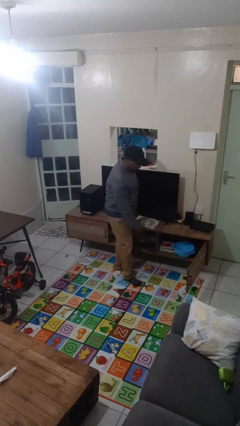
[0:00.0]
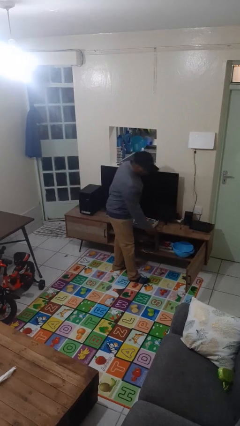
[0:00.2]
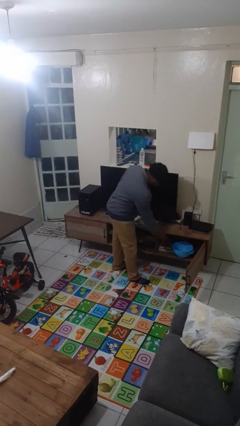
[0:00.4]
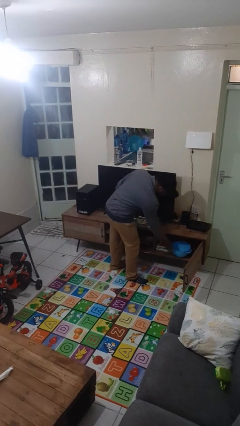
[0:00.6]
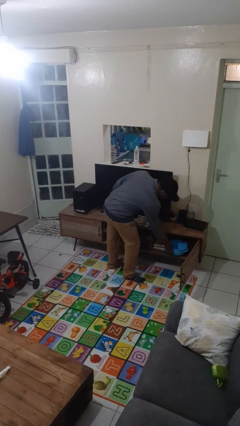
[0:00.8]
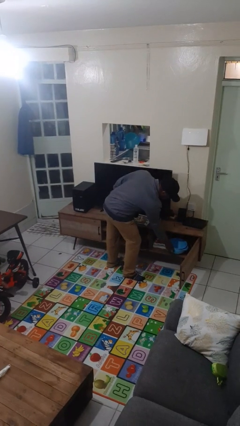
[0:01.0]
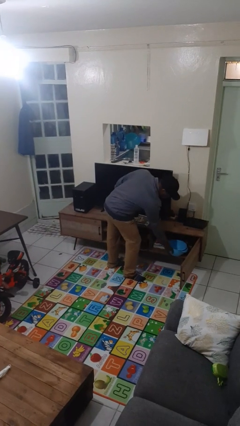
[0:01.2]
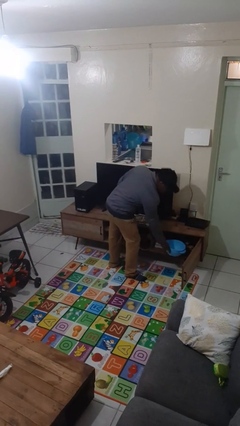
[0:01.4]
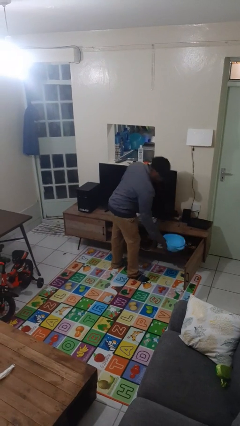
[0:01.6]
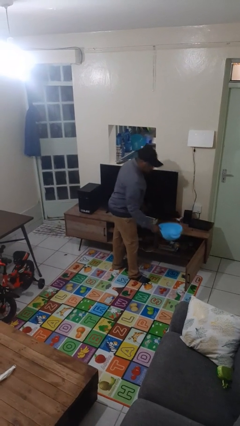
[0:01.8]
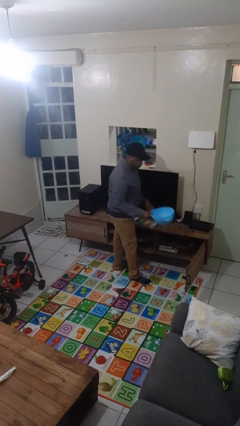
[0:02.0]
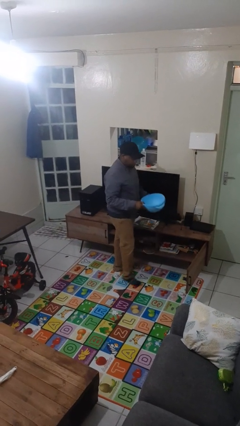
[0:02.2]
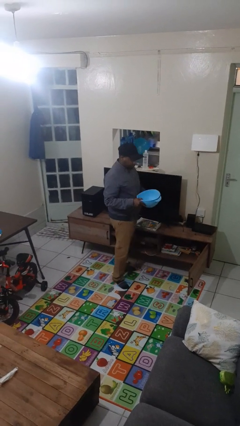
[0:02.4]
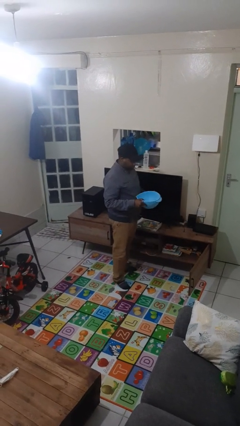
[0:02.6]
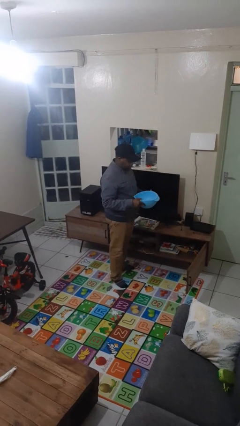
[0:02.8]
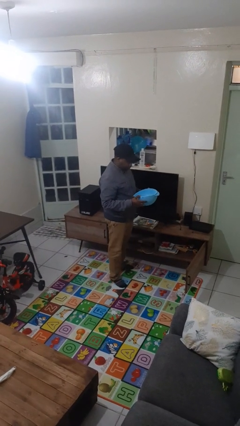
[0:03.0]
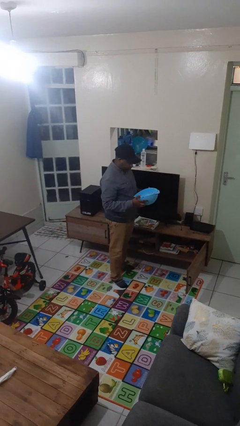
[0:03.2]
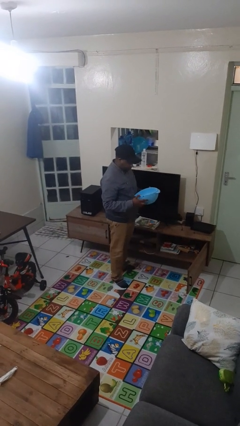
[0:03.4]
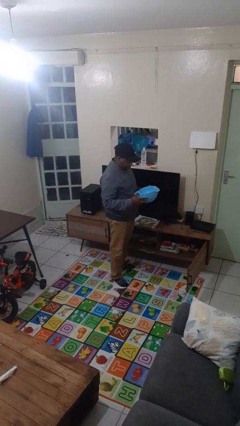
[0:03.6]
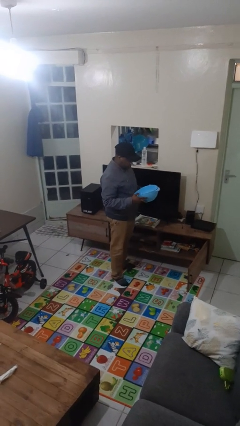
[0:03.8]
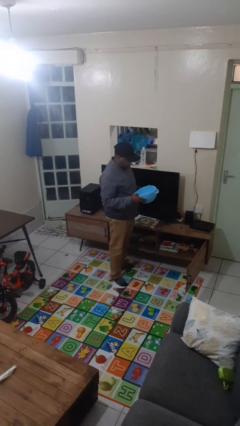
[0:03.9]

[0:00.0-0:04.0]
person picks up object from cabinet

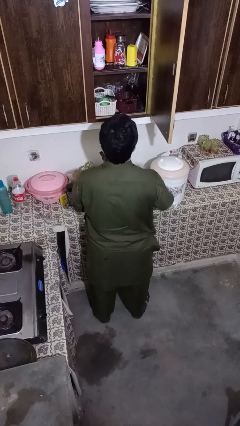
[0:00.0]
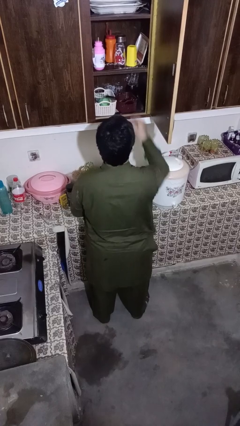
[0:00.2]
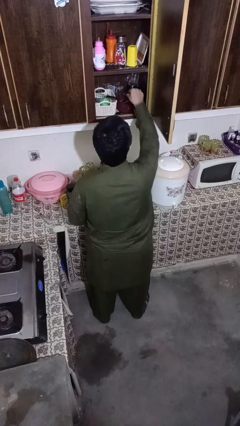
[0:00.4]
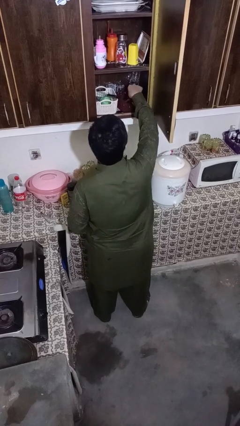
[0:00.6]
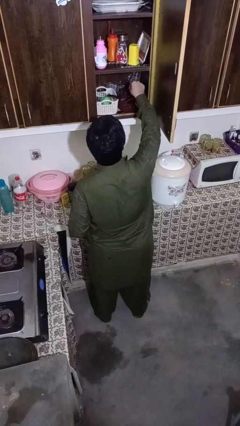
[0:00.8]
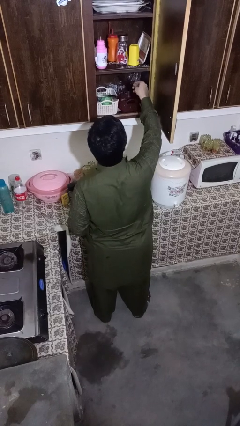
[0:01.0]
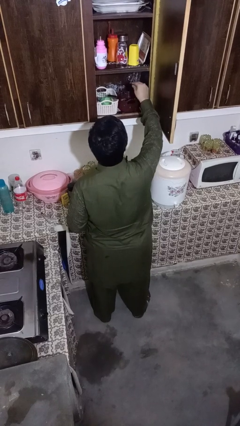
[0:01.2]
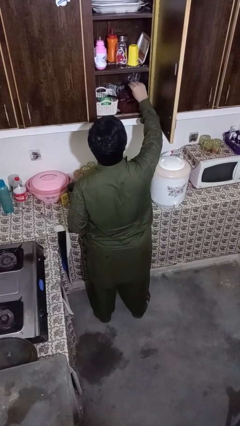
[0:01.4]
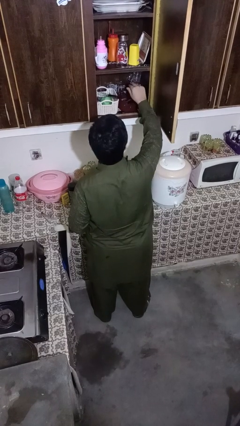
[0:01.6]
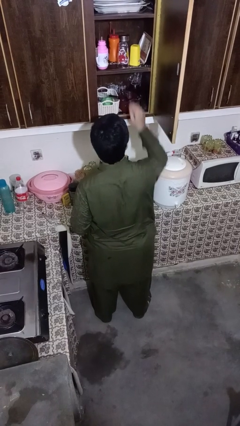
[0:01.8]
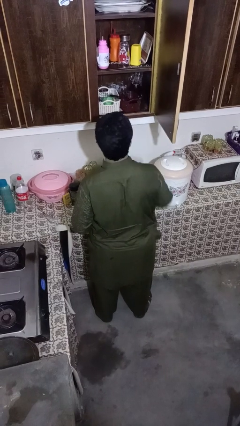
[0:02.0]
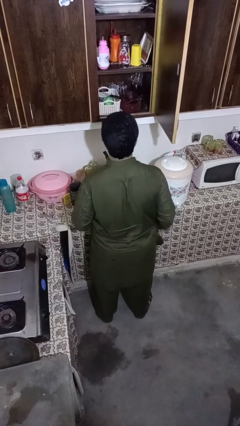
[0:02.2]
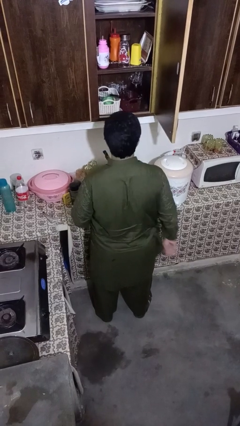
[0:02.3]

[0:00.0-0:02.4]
person searches in kitchen drawer

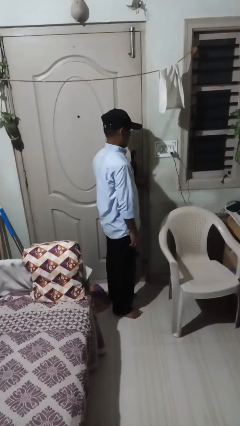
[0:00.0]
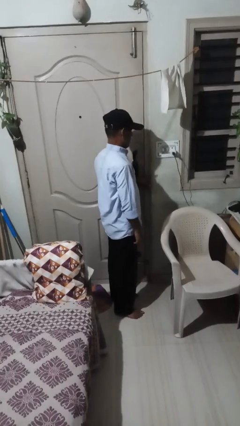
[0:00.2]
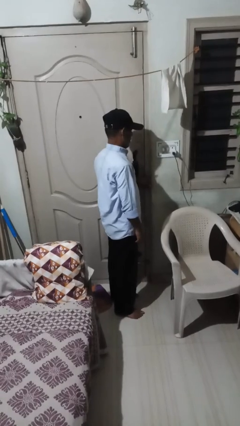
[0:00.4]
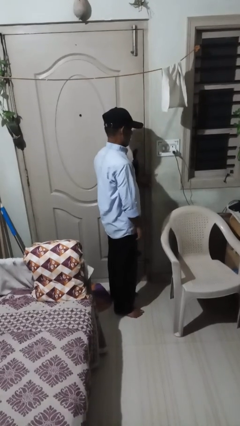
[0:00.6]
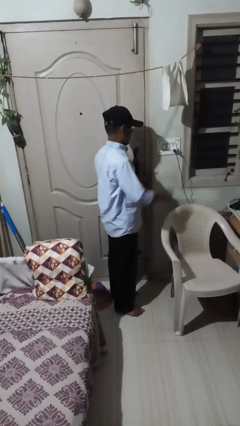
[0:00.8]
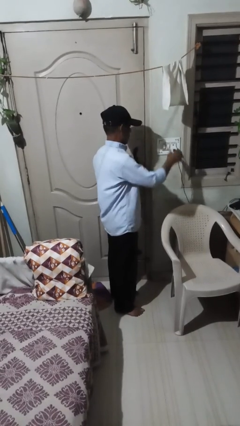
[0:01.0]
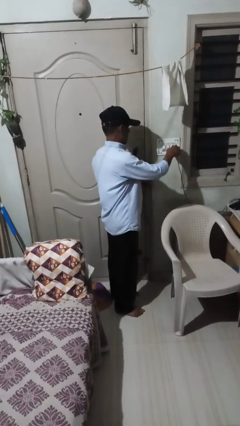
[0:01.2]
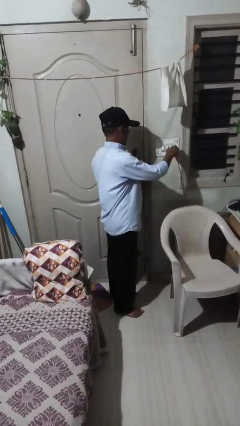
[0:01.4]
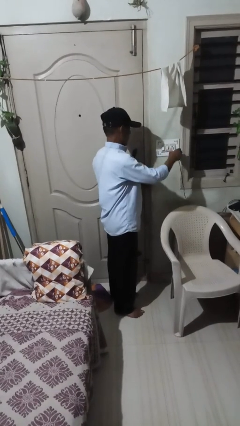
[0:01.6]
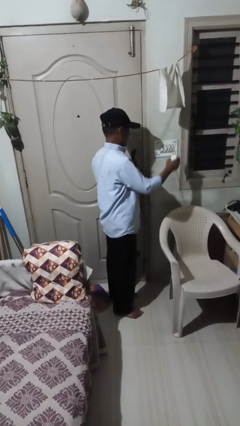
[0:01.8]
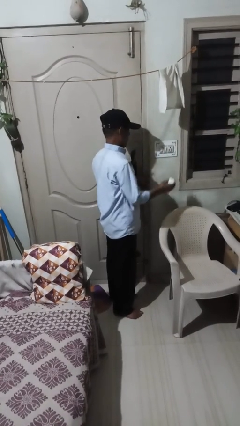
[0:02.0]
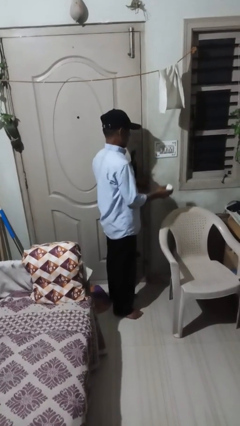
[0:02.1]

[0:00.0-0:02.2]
person unplugs from electrical socket

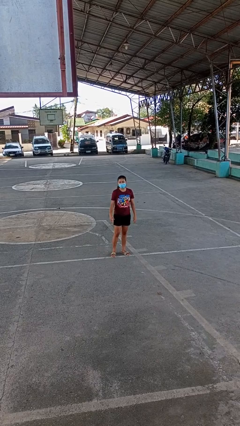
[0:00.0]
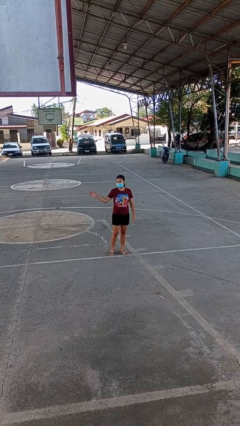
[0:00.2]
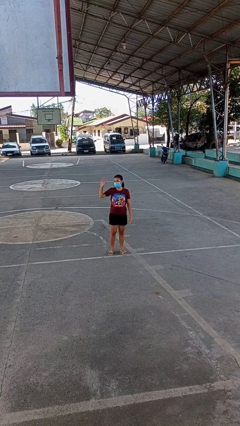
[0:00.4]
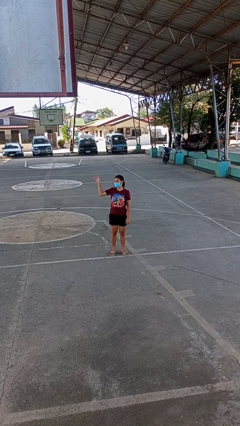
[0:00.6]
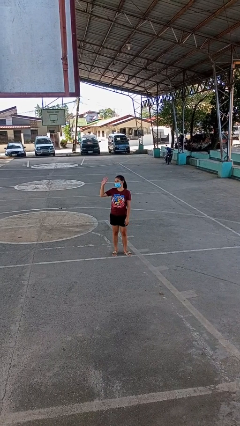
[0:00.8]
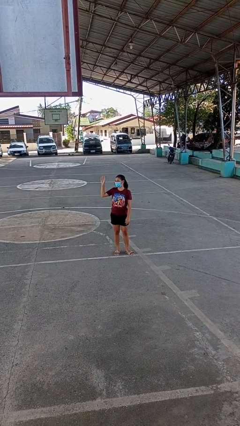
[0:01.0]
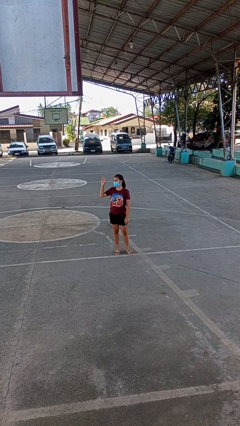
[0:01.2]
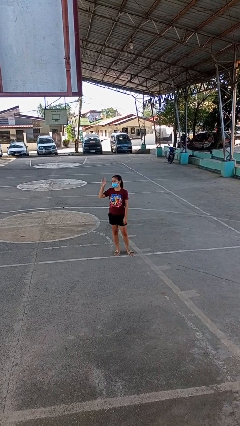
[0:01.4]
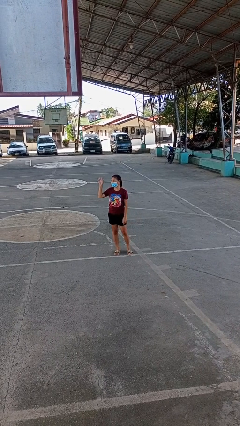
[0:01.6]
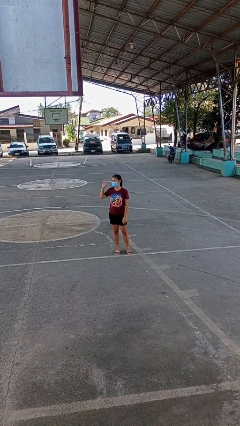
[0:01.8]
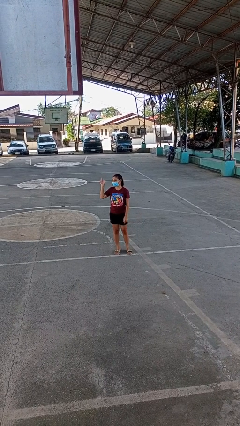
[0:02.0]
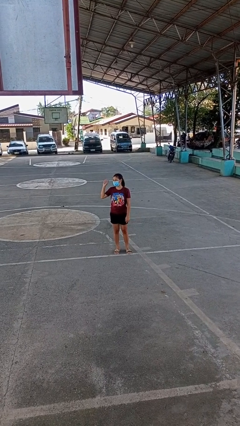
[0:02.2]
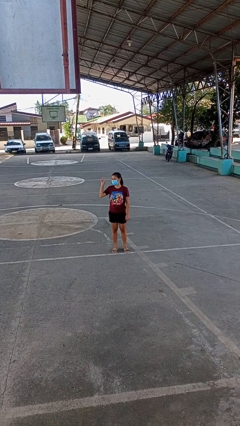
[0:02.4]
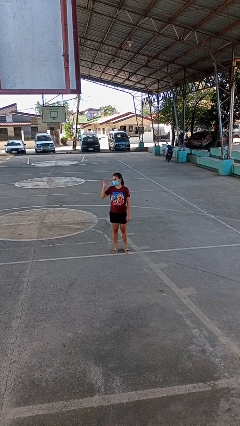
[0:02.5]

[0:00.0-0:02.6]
person waves at person

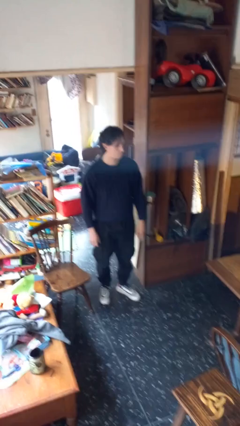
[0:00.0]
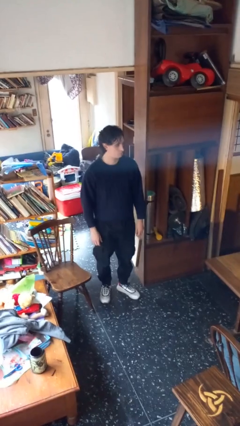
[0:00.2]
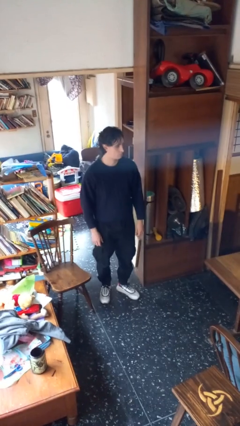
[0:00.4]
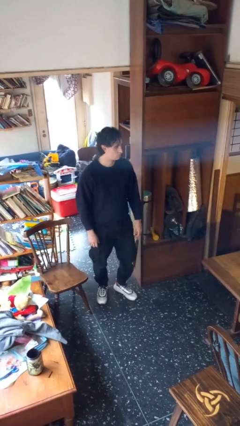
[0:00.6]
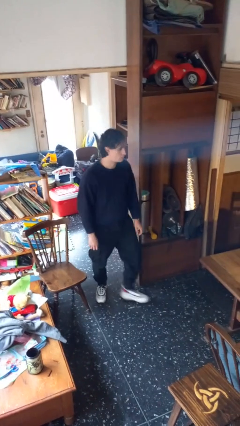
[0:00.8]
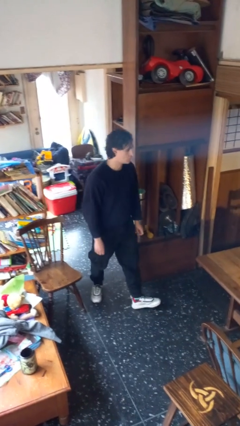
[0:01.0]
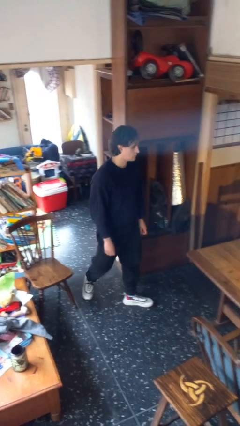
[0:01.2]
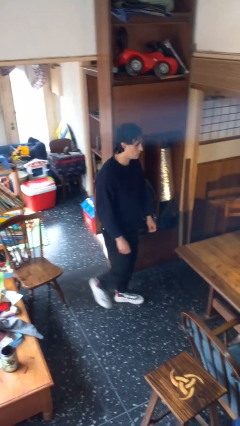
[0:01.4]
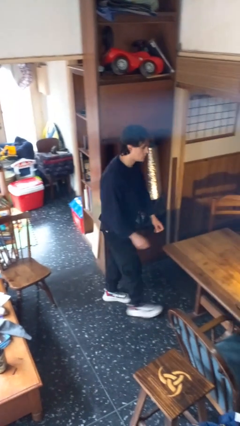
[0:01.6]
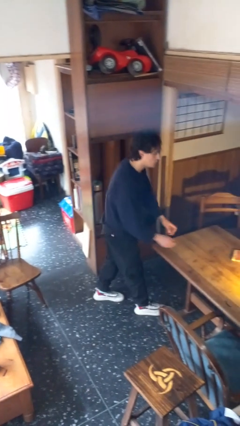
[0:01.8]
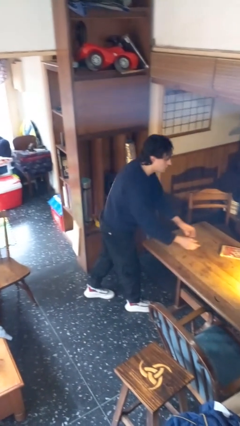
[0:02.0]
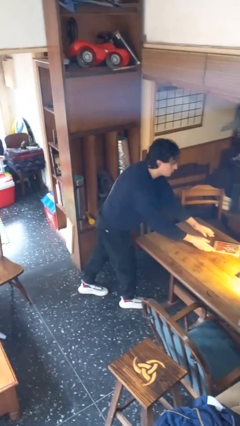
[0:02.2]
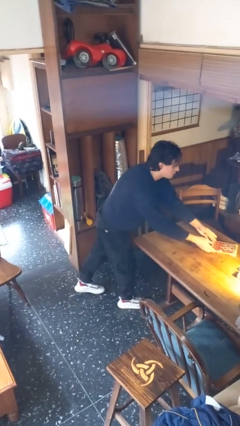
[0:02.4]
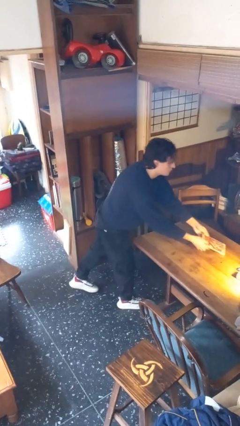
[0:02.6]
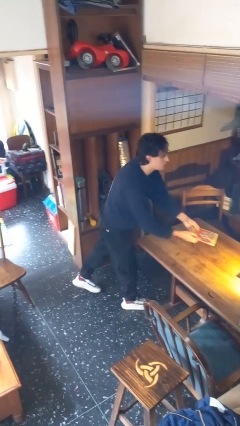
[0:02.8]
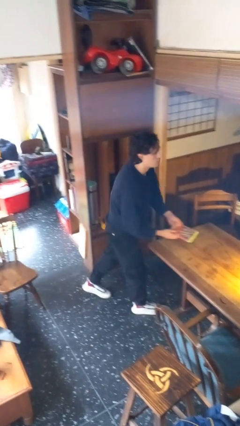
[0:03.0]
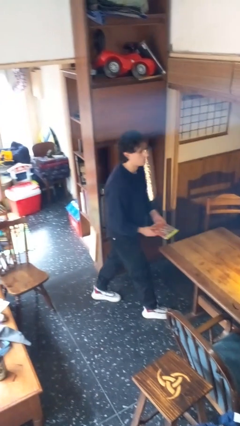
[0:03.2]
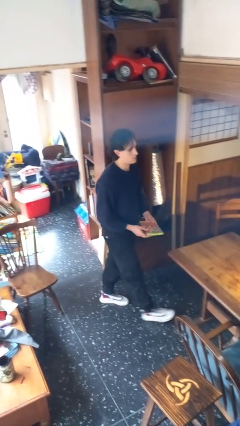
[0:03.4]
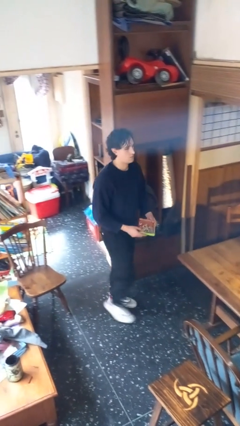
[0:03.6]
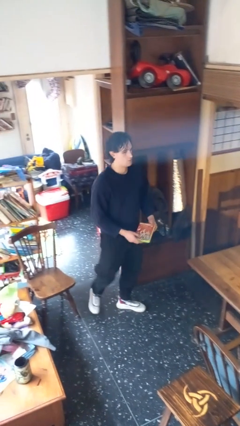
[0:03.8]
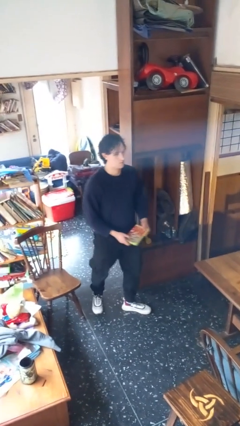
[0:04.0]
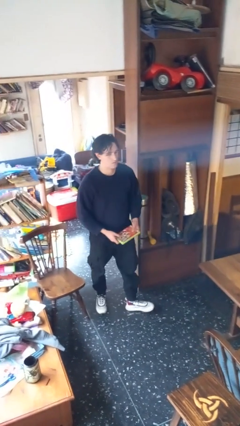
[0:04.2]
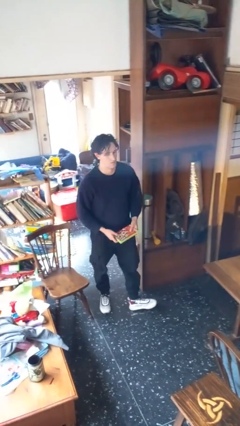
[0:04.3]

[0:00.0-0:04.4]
person picks up object from table

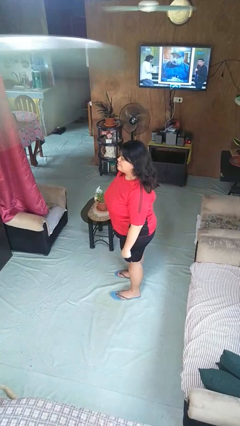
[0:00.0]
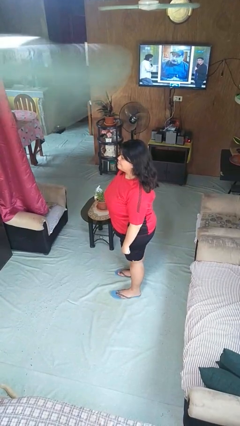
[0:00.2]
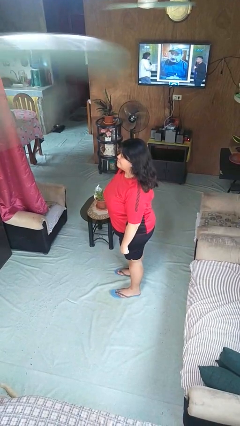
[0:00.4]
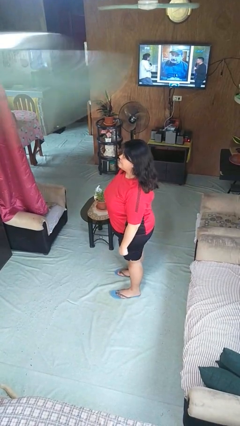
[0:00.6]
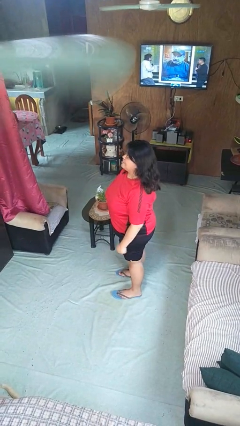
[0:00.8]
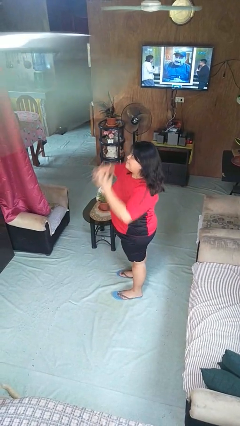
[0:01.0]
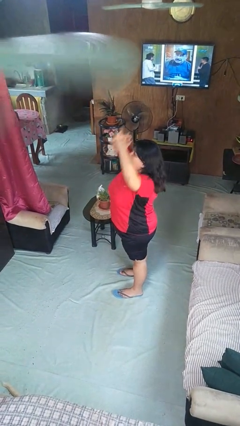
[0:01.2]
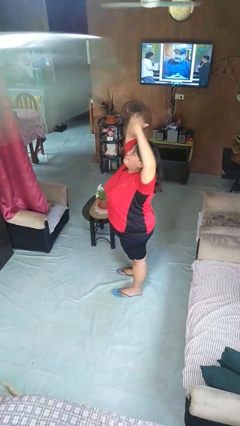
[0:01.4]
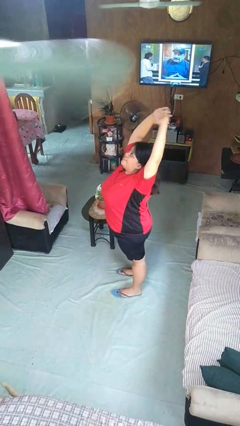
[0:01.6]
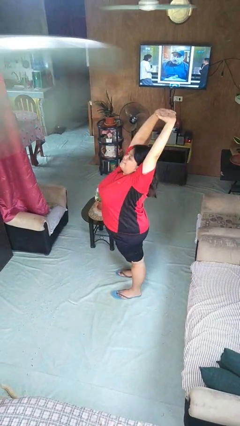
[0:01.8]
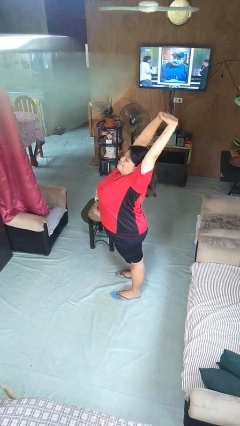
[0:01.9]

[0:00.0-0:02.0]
person stretches arms over head
